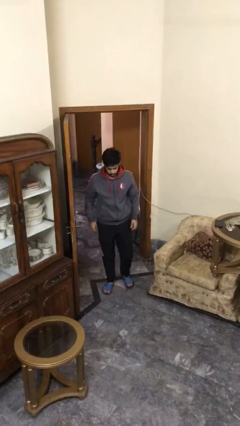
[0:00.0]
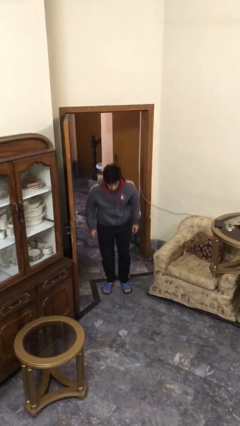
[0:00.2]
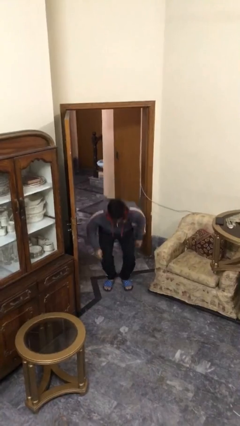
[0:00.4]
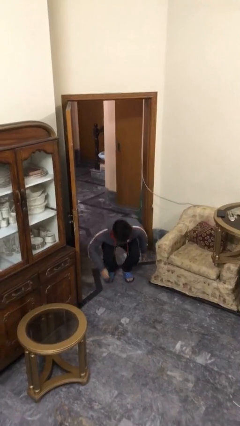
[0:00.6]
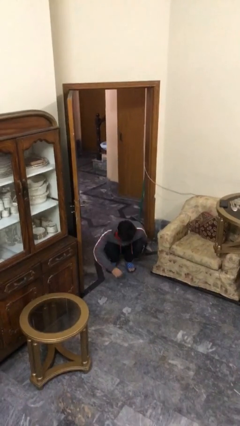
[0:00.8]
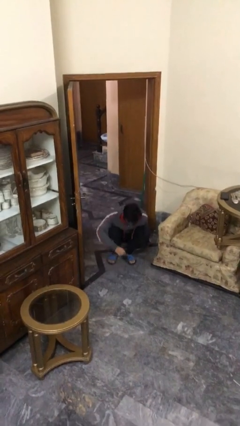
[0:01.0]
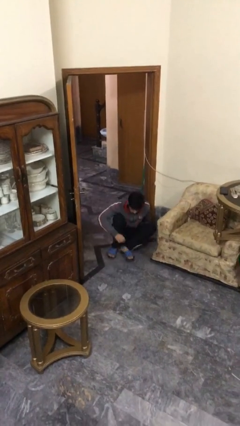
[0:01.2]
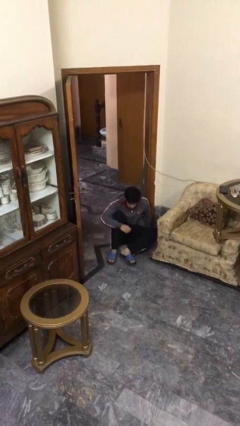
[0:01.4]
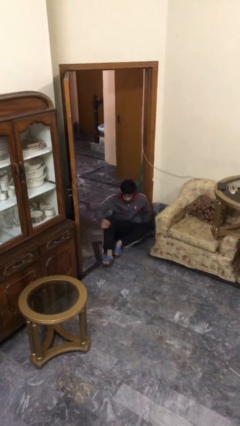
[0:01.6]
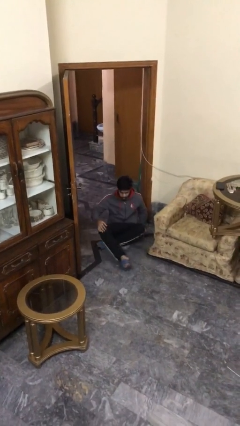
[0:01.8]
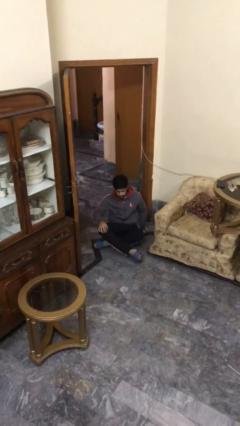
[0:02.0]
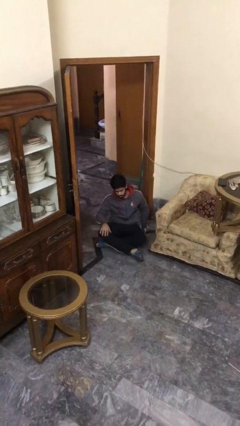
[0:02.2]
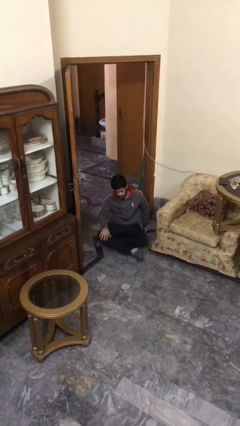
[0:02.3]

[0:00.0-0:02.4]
person sits down

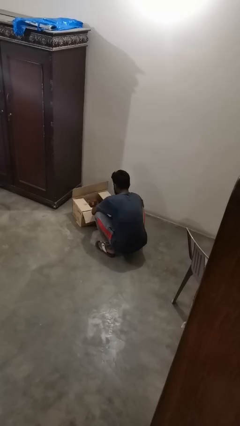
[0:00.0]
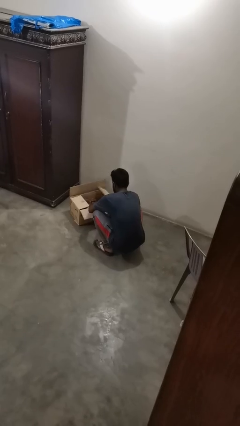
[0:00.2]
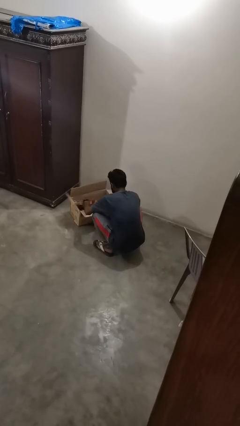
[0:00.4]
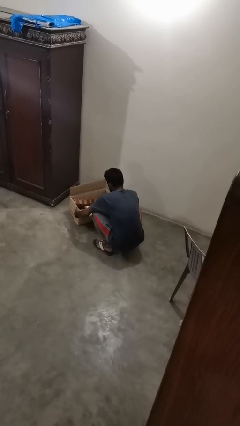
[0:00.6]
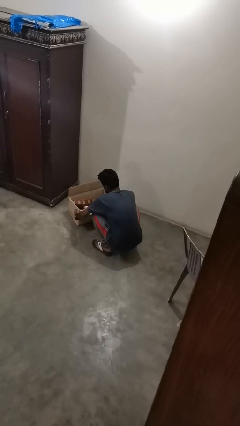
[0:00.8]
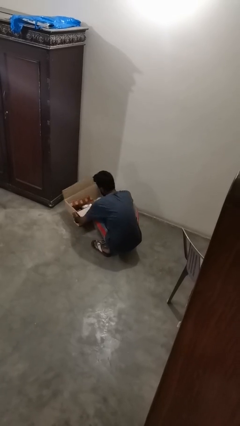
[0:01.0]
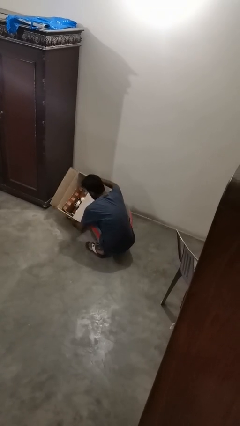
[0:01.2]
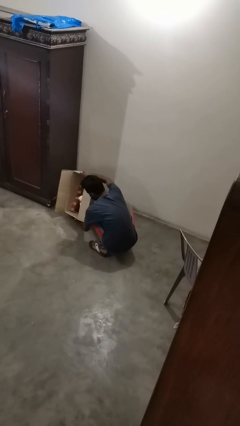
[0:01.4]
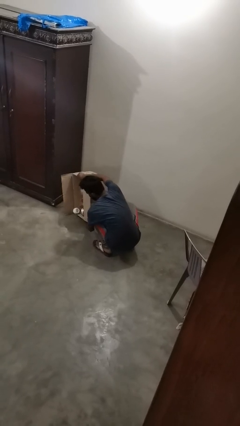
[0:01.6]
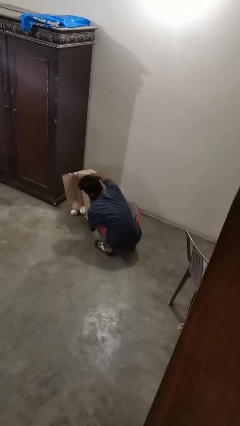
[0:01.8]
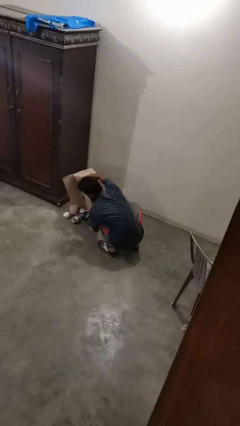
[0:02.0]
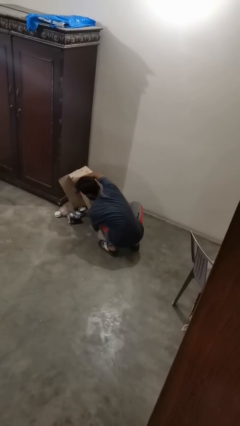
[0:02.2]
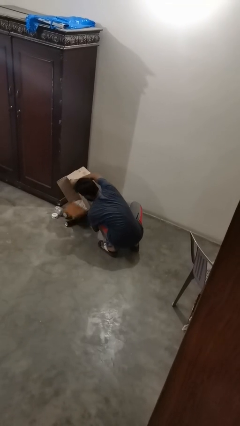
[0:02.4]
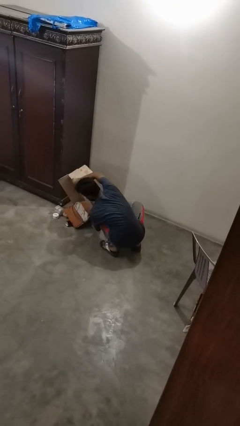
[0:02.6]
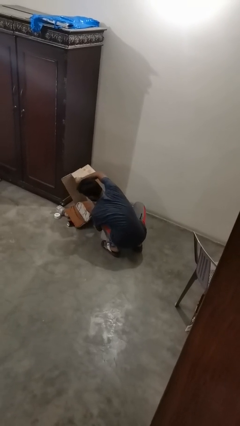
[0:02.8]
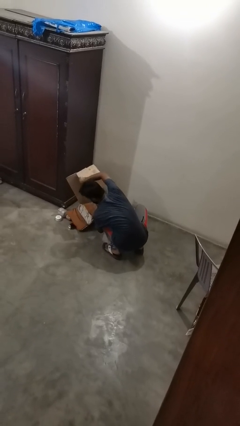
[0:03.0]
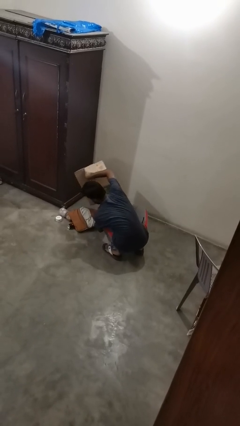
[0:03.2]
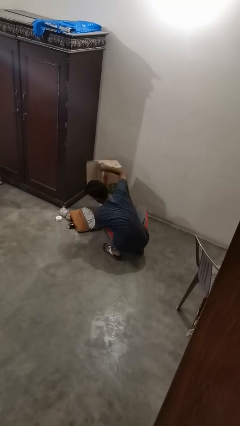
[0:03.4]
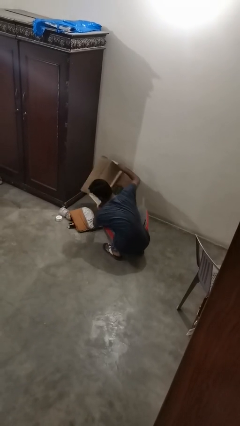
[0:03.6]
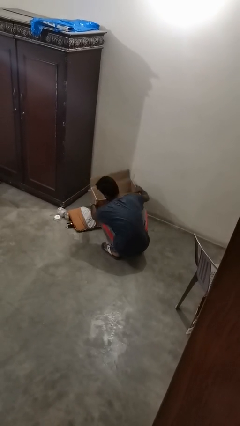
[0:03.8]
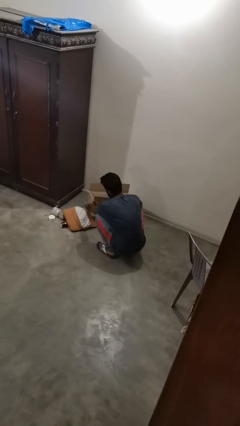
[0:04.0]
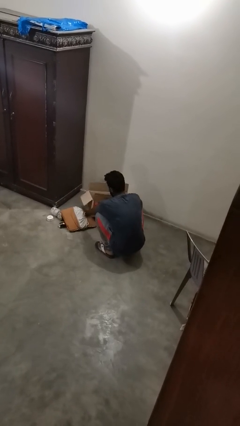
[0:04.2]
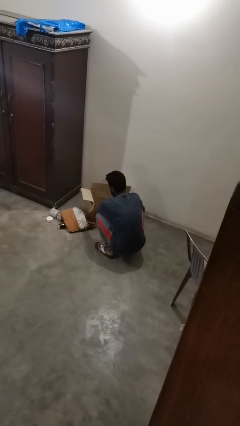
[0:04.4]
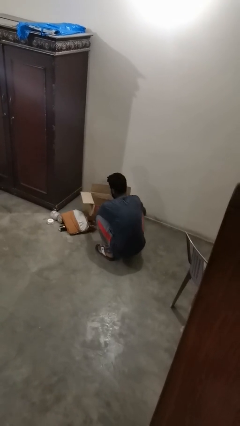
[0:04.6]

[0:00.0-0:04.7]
person unloads box onto floor

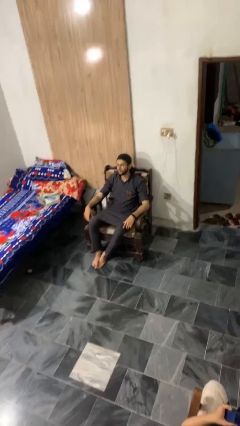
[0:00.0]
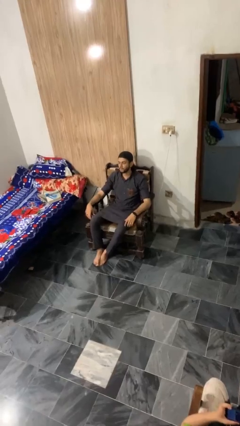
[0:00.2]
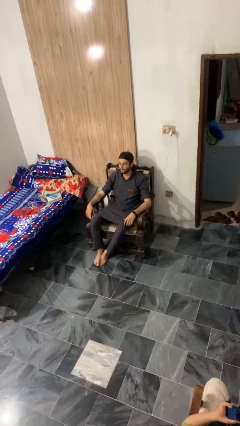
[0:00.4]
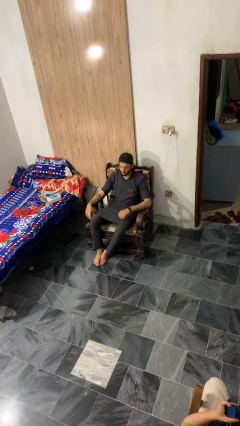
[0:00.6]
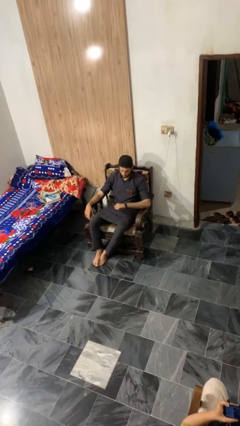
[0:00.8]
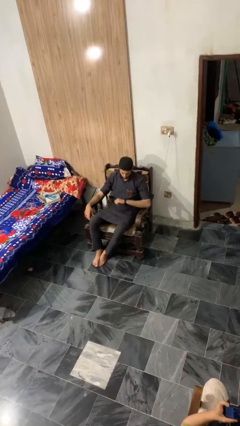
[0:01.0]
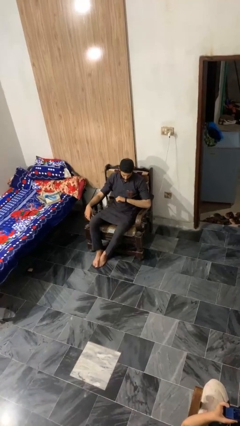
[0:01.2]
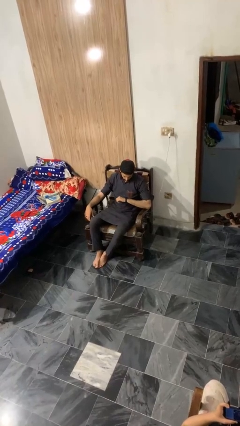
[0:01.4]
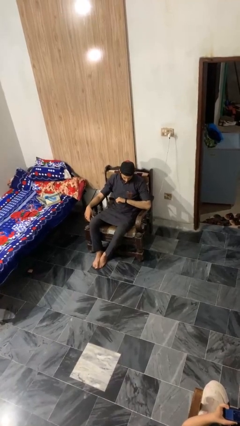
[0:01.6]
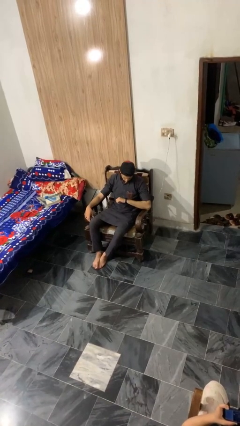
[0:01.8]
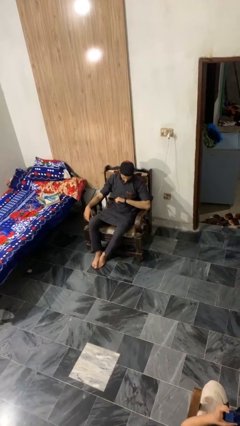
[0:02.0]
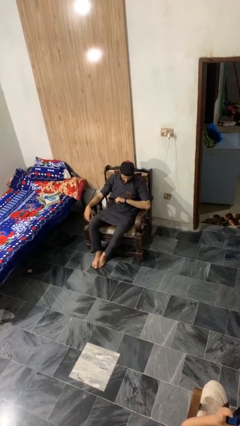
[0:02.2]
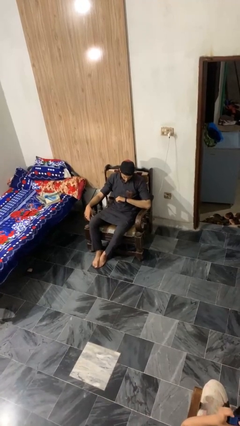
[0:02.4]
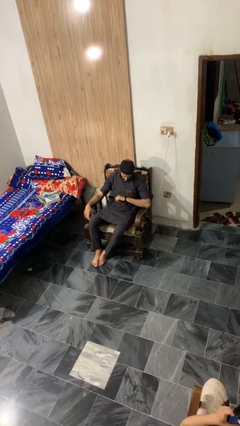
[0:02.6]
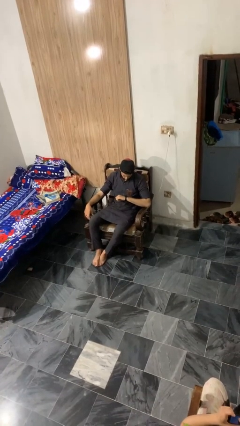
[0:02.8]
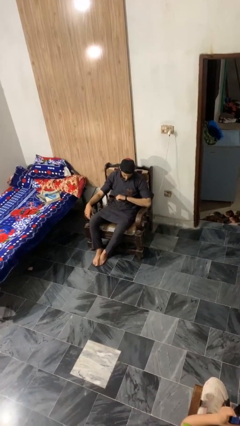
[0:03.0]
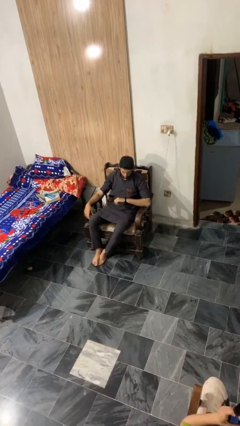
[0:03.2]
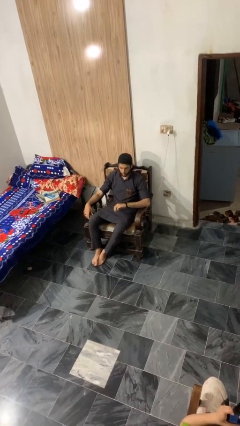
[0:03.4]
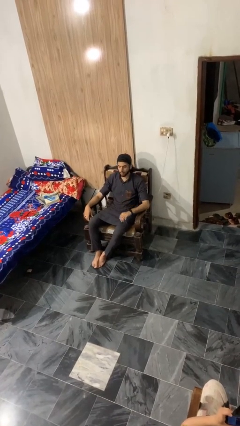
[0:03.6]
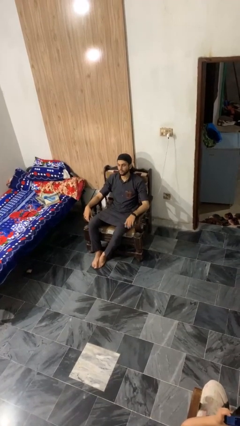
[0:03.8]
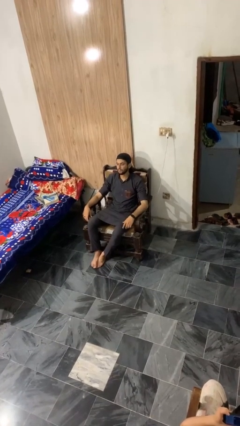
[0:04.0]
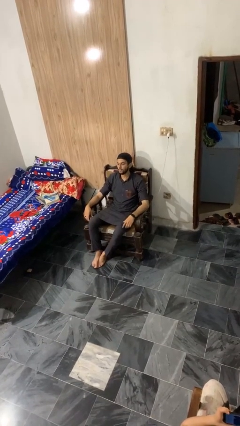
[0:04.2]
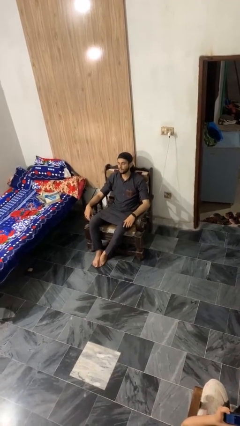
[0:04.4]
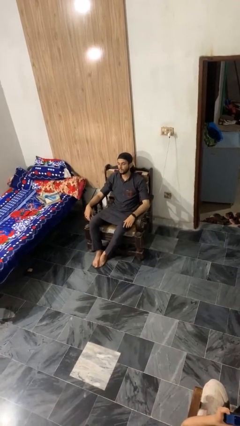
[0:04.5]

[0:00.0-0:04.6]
person looks at wristwatch

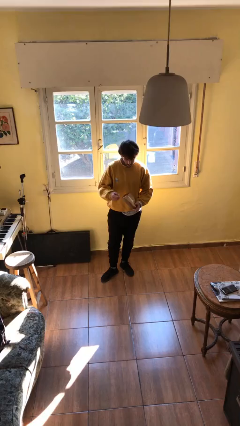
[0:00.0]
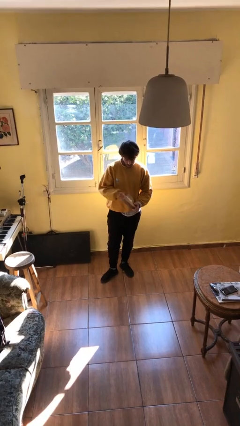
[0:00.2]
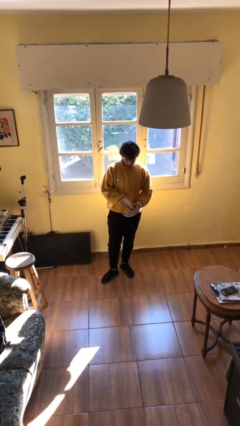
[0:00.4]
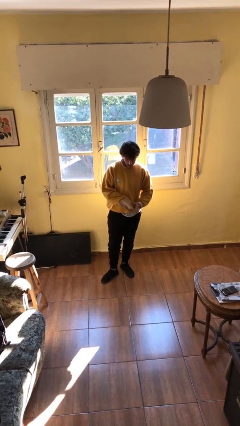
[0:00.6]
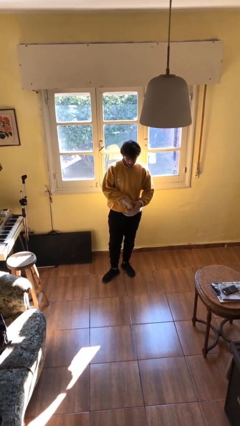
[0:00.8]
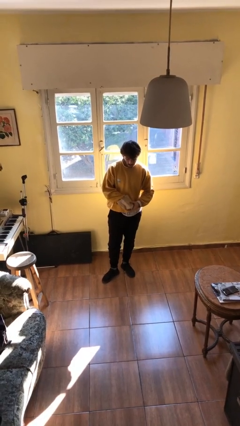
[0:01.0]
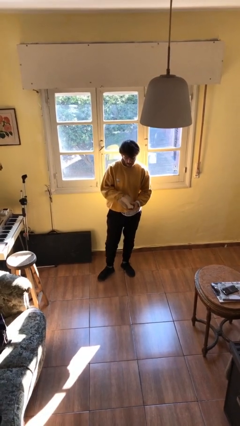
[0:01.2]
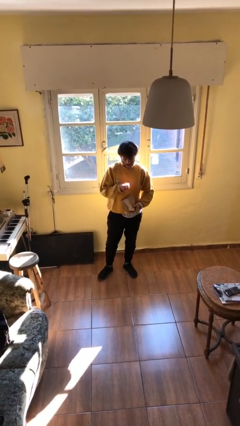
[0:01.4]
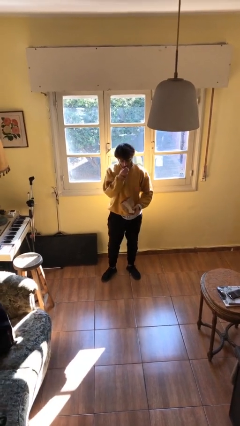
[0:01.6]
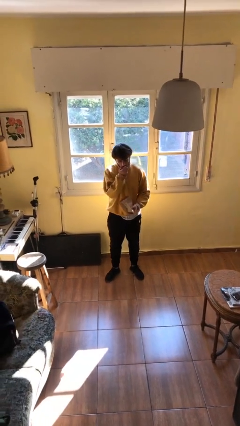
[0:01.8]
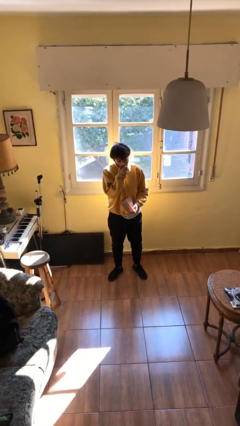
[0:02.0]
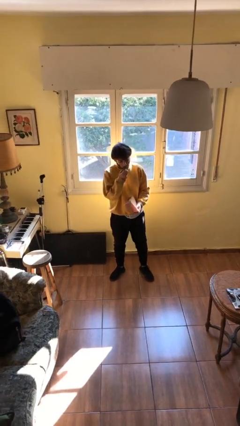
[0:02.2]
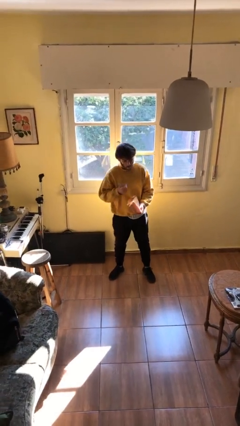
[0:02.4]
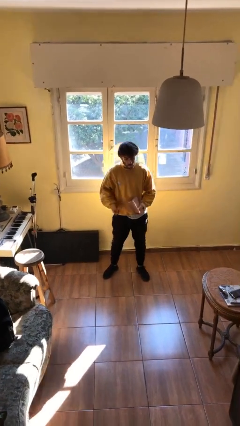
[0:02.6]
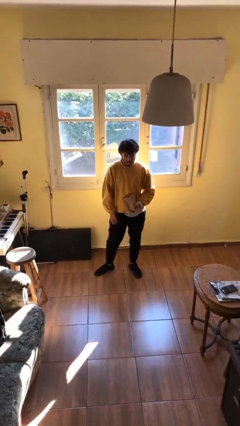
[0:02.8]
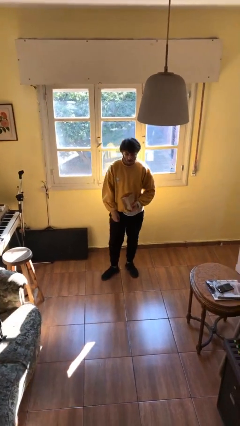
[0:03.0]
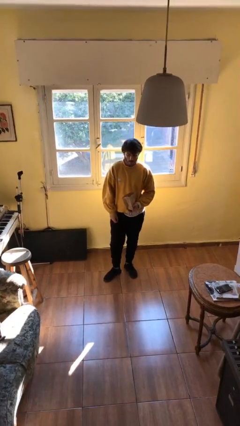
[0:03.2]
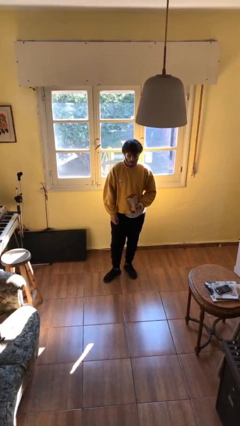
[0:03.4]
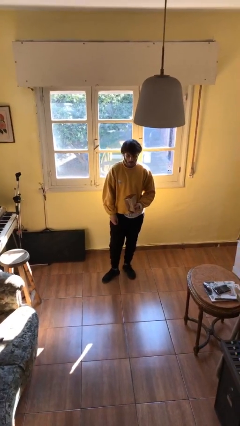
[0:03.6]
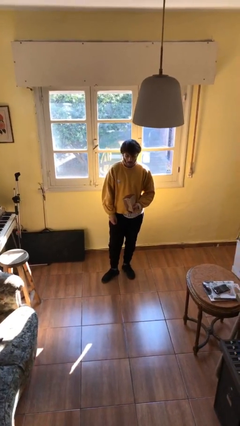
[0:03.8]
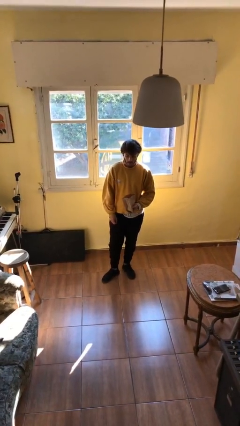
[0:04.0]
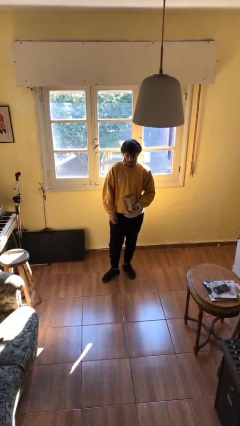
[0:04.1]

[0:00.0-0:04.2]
person eats snack from bag

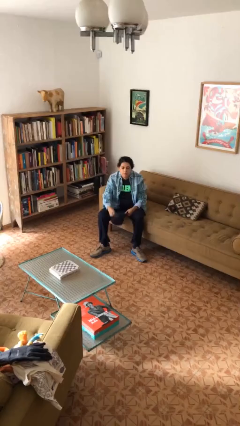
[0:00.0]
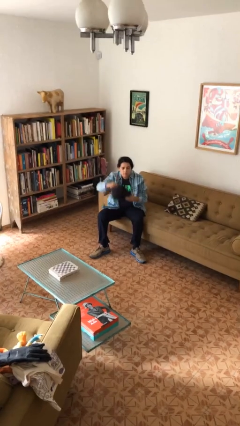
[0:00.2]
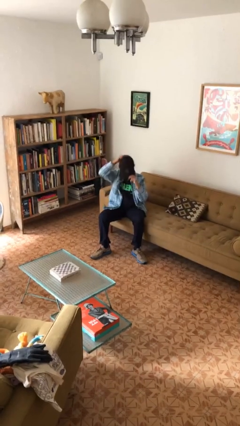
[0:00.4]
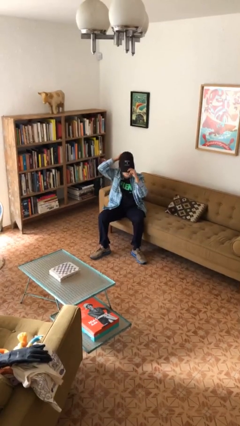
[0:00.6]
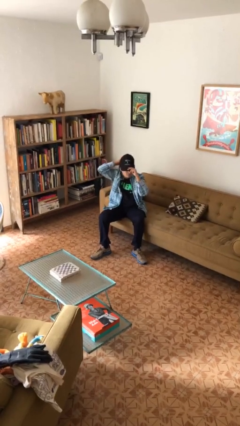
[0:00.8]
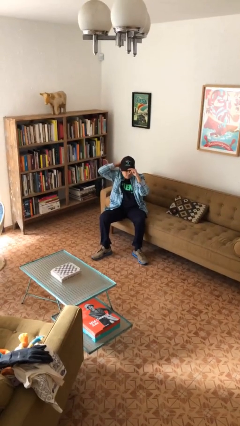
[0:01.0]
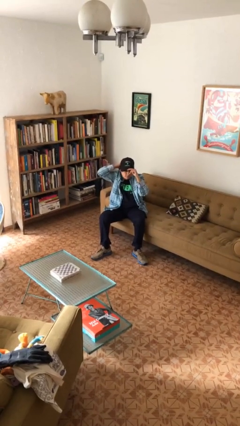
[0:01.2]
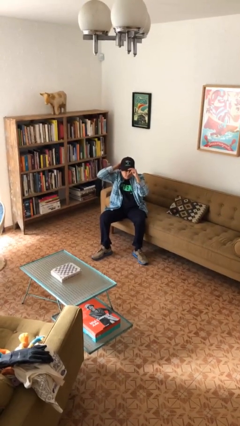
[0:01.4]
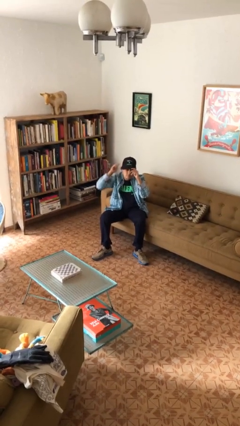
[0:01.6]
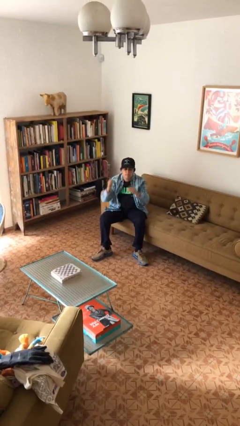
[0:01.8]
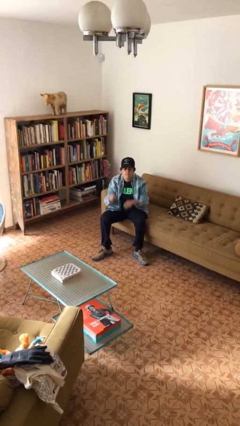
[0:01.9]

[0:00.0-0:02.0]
person puts on hat
